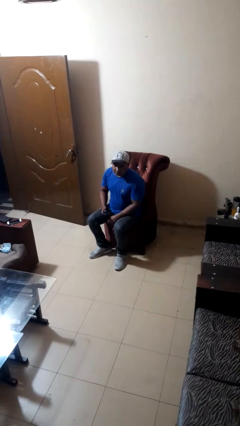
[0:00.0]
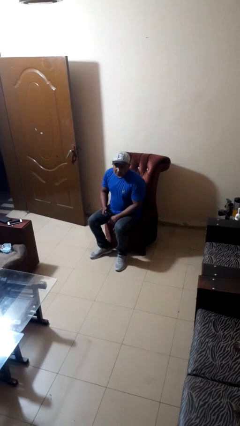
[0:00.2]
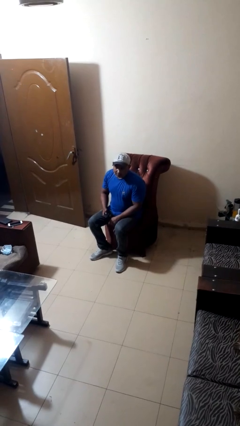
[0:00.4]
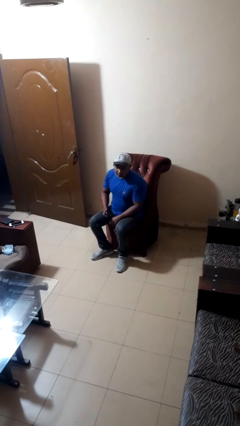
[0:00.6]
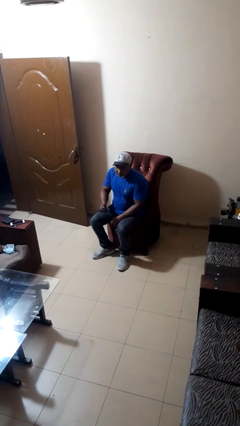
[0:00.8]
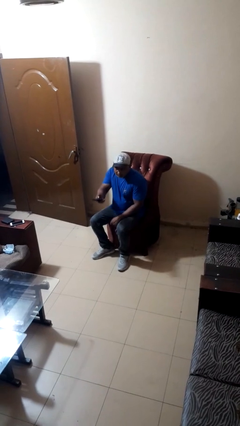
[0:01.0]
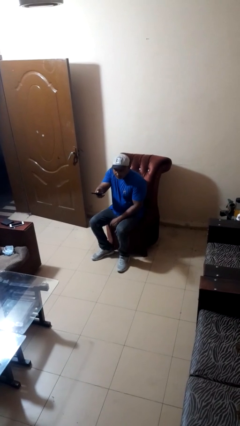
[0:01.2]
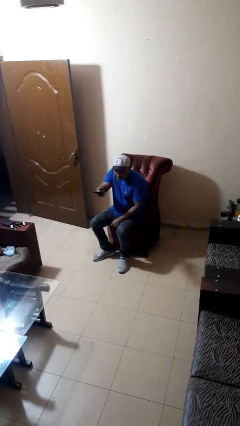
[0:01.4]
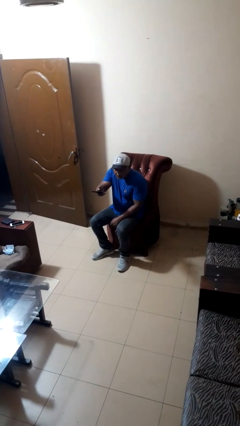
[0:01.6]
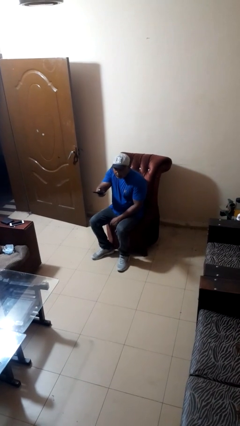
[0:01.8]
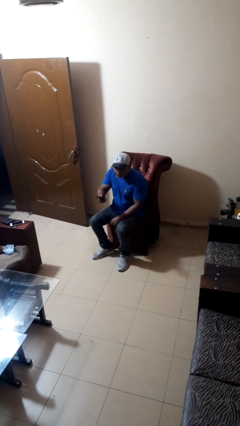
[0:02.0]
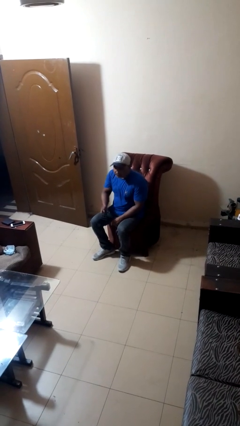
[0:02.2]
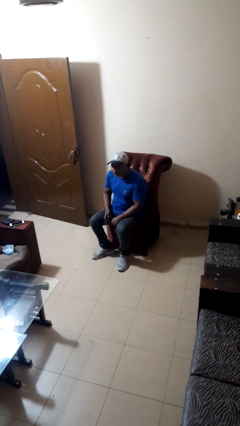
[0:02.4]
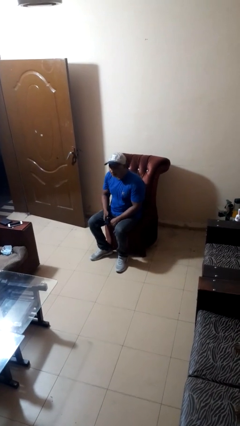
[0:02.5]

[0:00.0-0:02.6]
person uses television remote

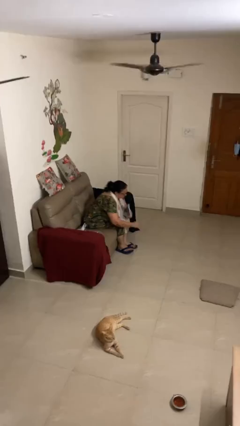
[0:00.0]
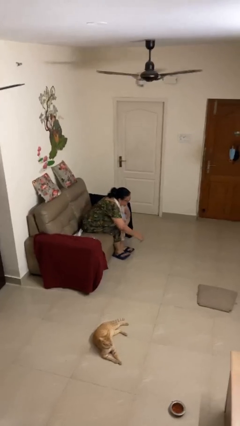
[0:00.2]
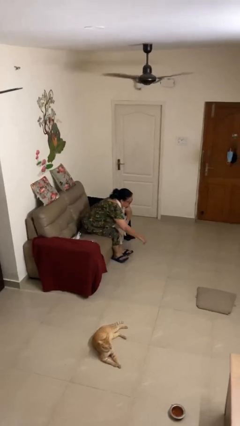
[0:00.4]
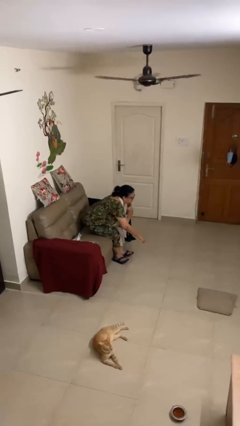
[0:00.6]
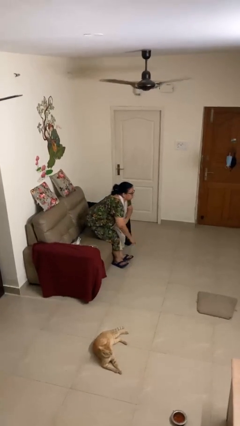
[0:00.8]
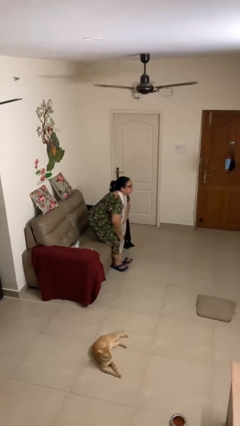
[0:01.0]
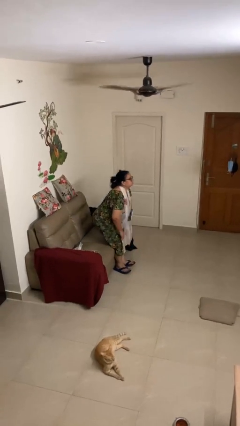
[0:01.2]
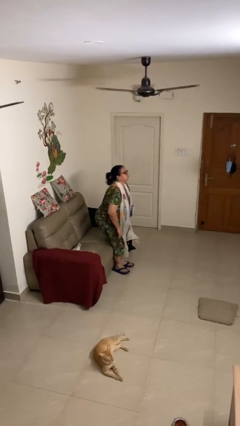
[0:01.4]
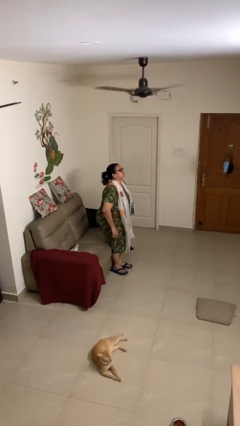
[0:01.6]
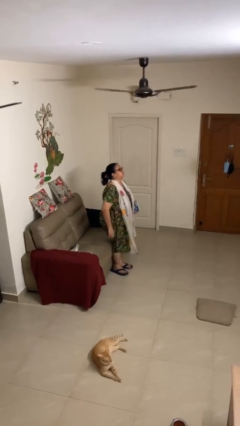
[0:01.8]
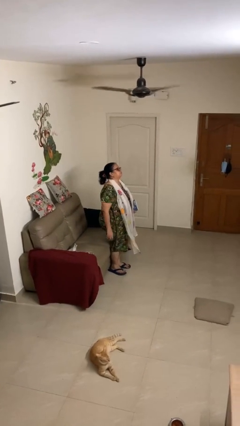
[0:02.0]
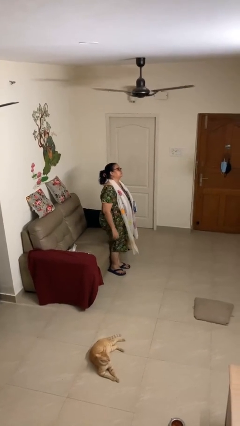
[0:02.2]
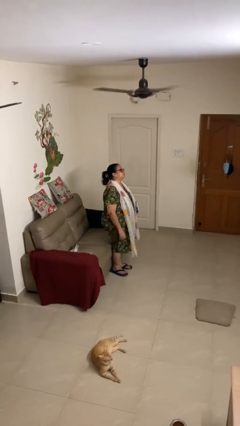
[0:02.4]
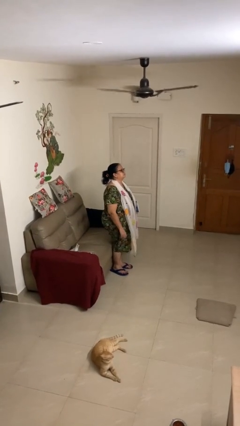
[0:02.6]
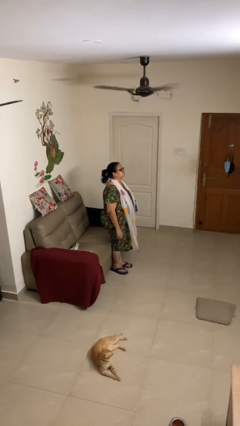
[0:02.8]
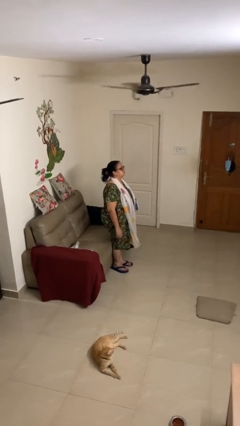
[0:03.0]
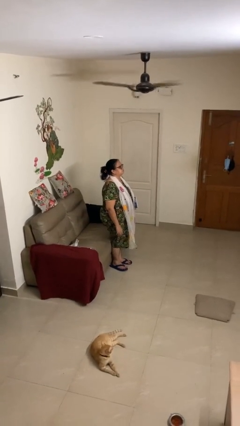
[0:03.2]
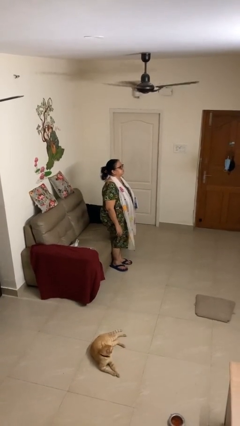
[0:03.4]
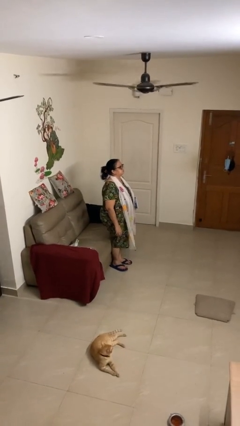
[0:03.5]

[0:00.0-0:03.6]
person stands up

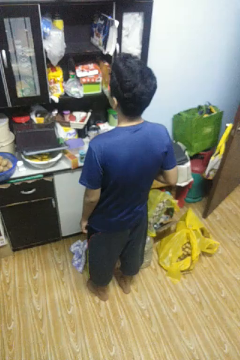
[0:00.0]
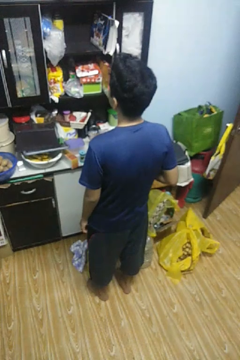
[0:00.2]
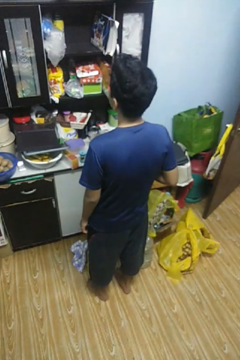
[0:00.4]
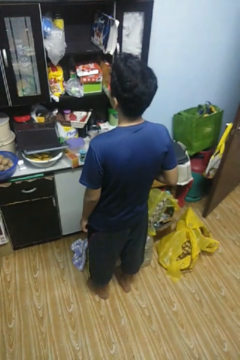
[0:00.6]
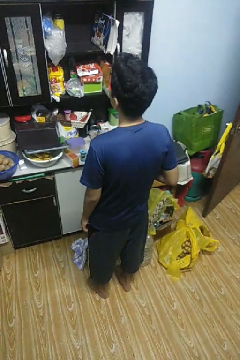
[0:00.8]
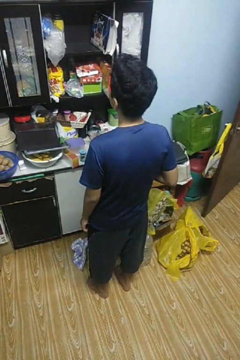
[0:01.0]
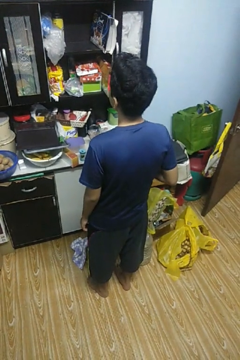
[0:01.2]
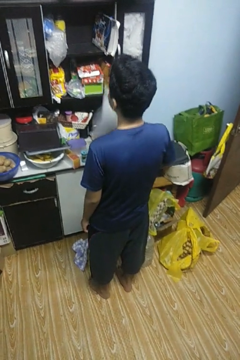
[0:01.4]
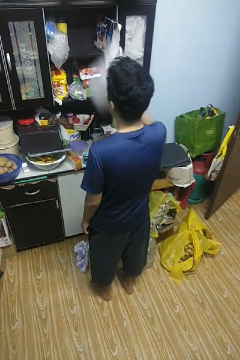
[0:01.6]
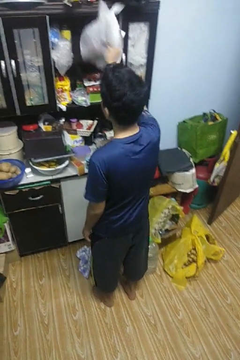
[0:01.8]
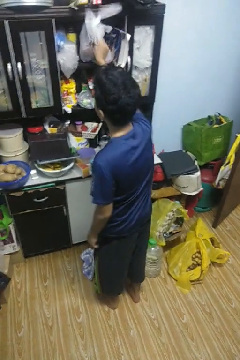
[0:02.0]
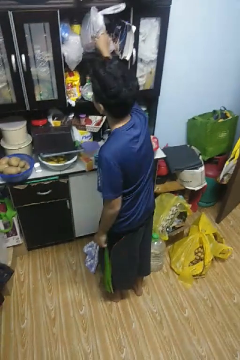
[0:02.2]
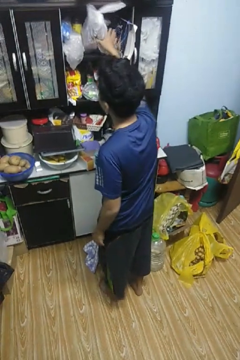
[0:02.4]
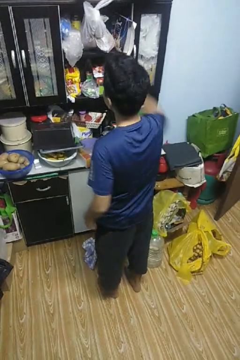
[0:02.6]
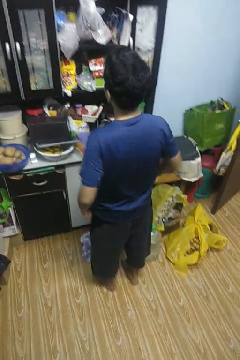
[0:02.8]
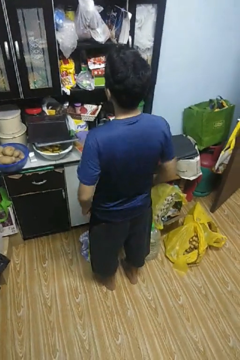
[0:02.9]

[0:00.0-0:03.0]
person loads groceries into cabinet

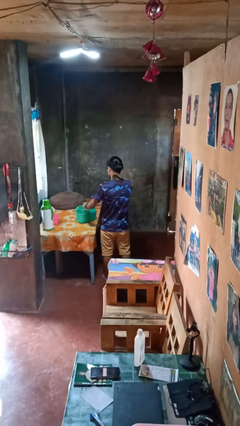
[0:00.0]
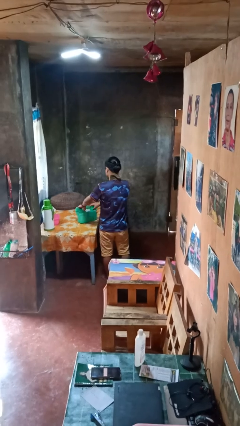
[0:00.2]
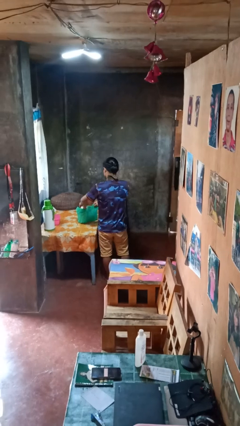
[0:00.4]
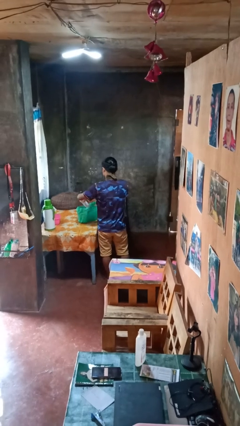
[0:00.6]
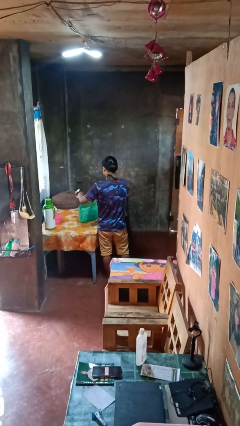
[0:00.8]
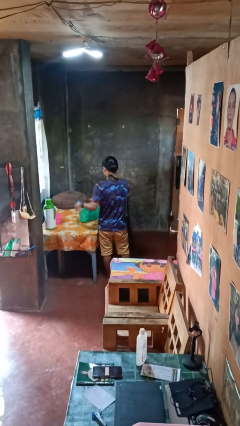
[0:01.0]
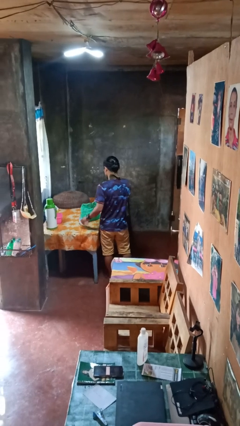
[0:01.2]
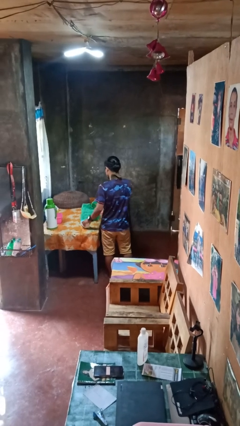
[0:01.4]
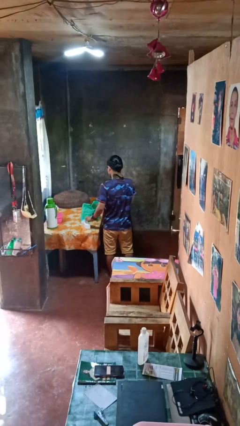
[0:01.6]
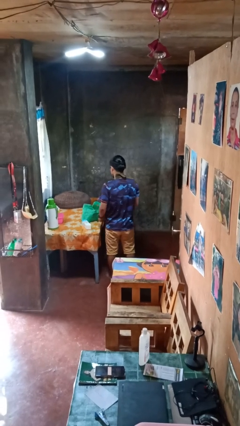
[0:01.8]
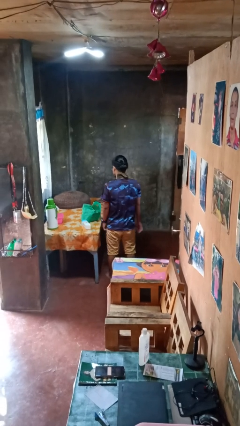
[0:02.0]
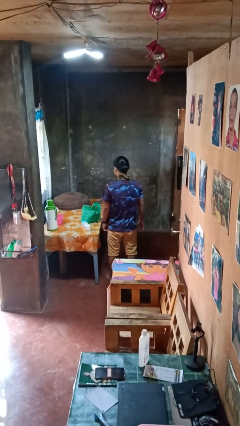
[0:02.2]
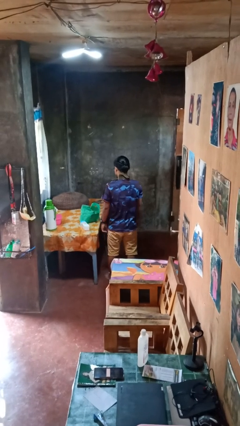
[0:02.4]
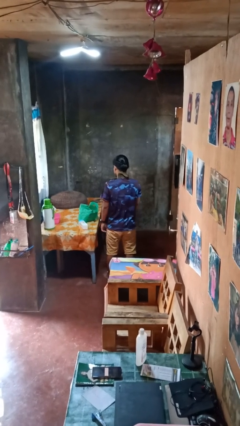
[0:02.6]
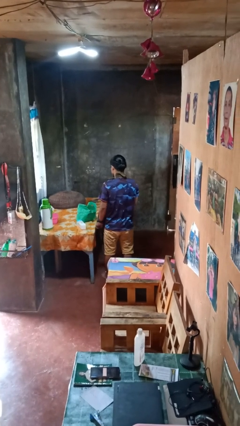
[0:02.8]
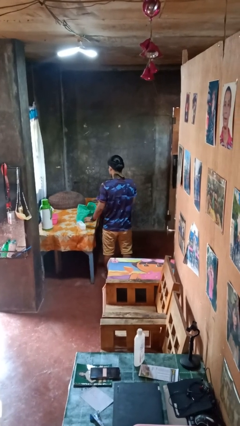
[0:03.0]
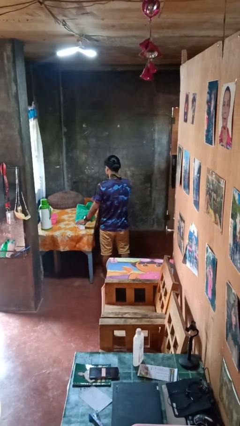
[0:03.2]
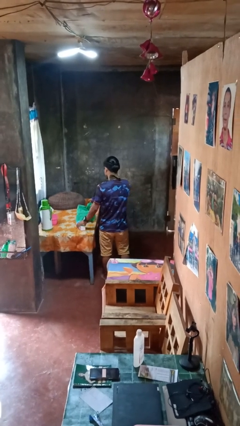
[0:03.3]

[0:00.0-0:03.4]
person takes object from bag

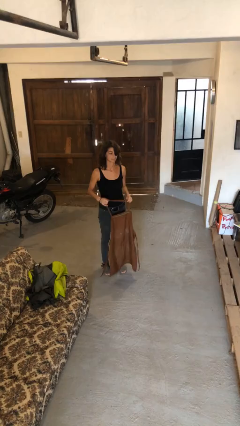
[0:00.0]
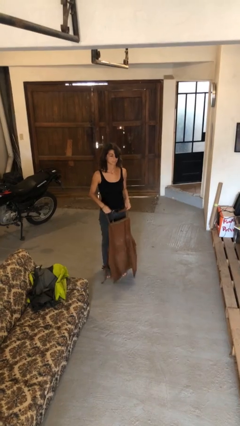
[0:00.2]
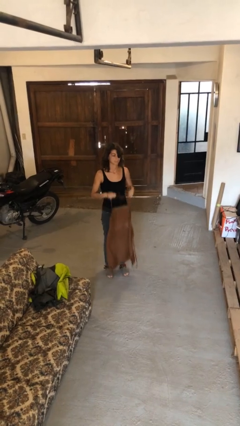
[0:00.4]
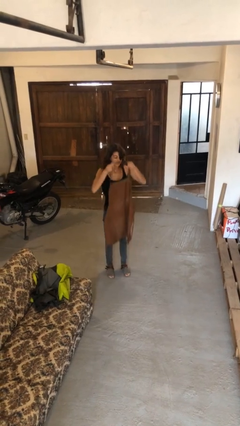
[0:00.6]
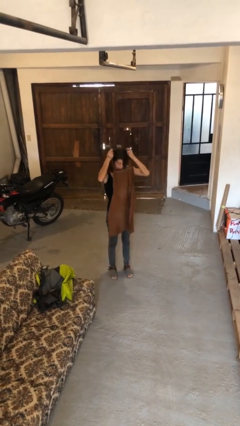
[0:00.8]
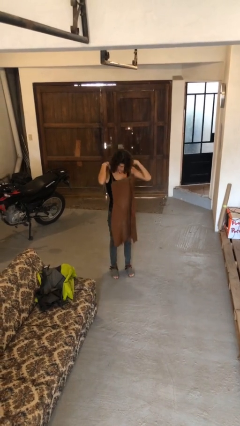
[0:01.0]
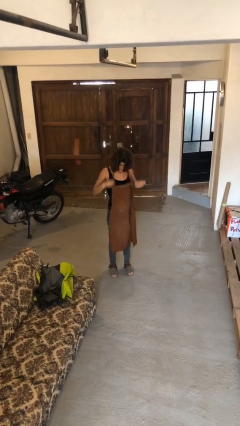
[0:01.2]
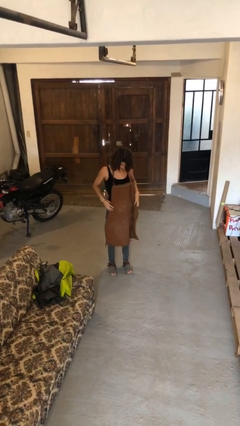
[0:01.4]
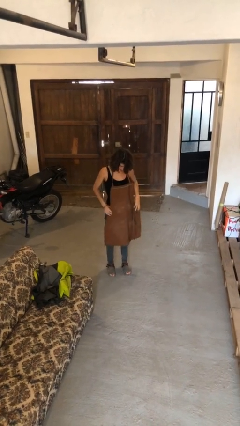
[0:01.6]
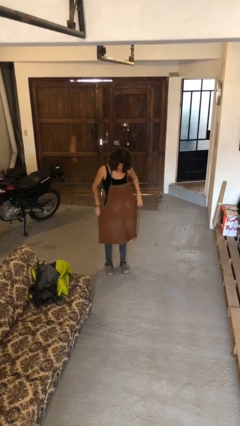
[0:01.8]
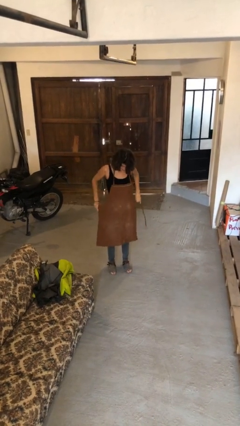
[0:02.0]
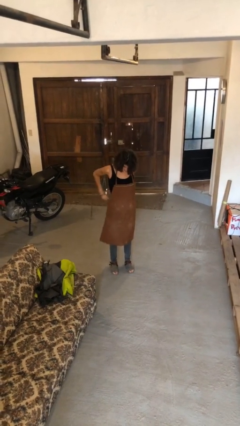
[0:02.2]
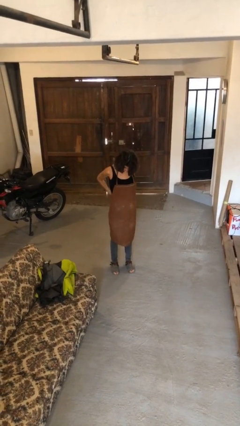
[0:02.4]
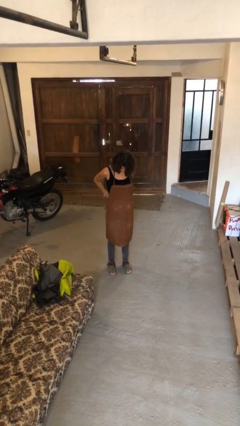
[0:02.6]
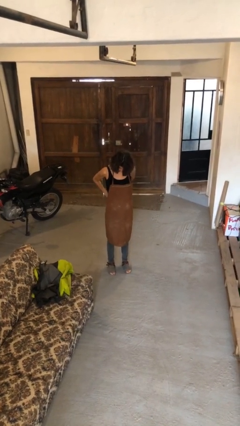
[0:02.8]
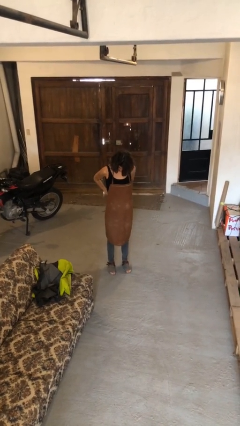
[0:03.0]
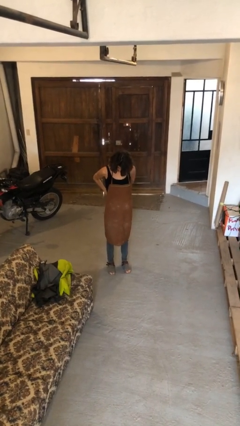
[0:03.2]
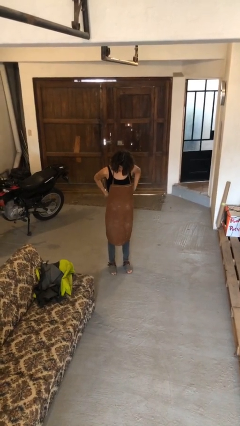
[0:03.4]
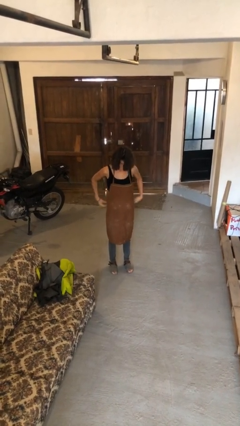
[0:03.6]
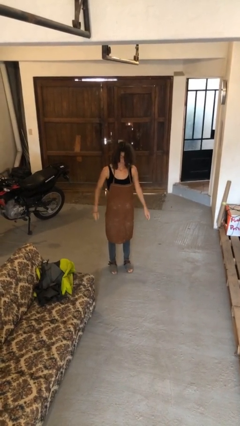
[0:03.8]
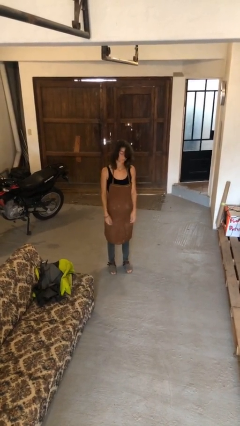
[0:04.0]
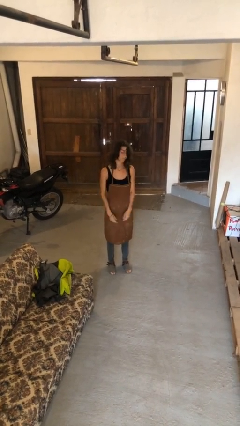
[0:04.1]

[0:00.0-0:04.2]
person puts on apron

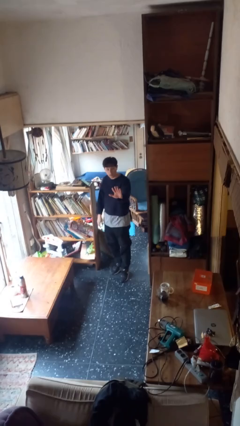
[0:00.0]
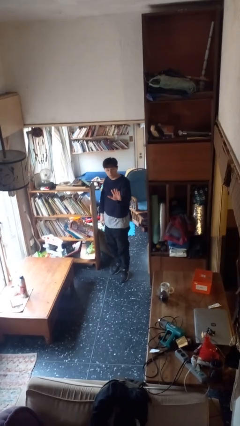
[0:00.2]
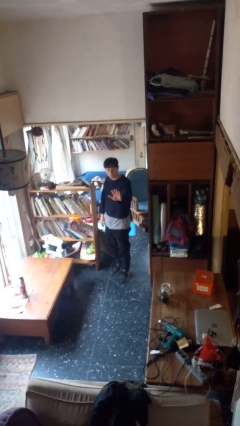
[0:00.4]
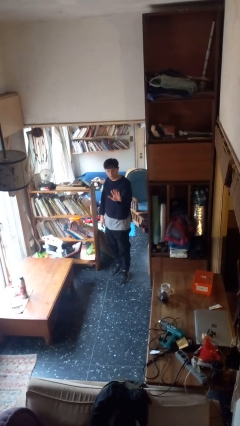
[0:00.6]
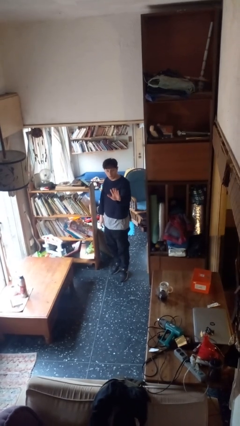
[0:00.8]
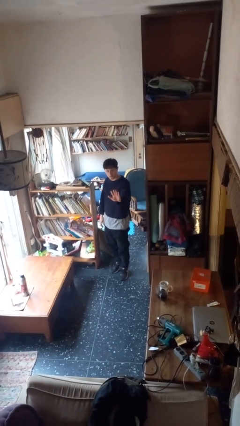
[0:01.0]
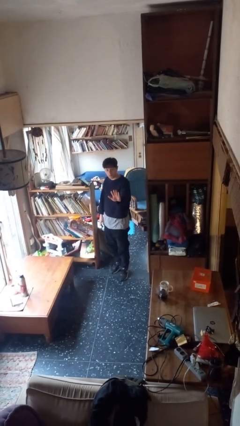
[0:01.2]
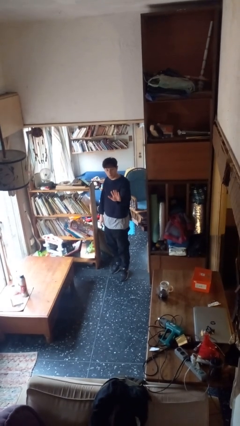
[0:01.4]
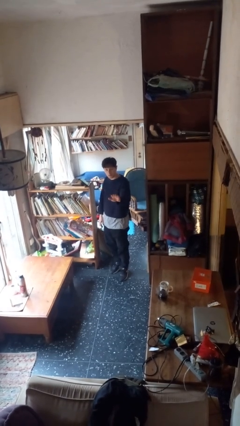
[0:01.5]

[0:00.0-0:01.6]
person gestures stop
